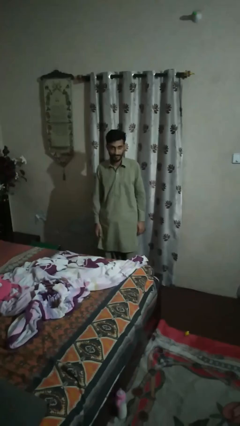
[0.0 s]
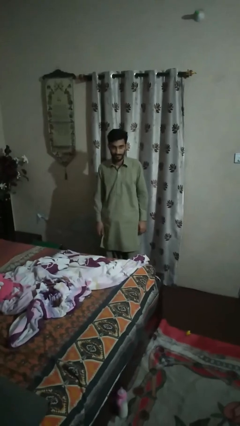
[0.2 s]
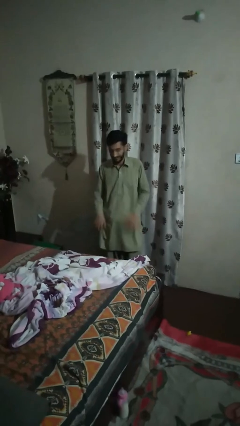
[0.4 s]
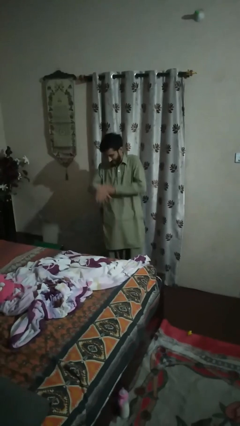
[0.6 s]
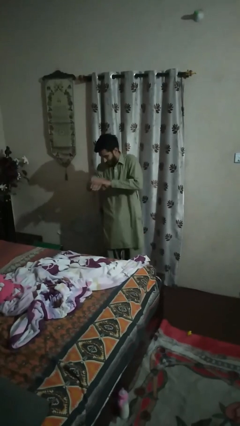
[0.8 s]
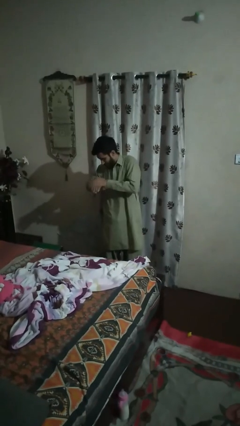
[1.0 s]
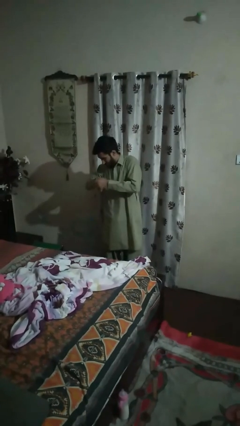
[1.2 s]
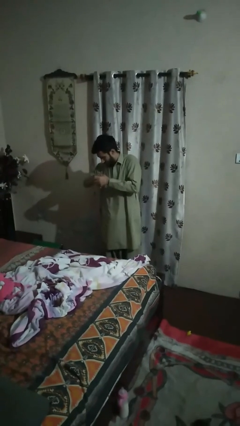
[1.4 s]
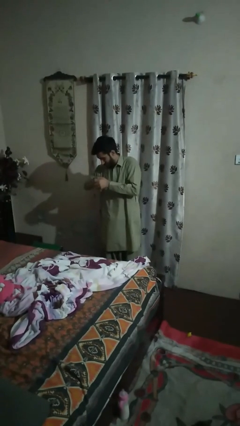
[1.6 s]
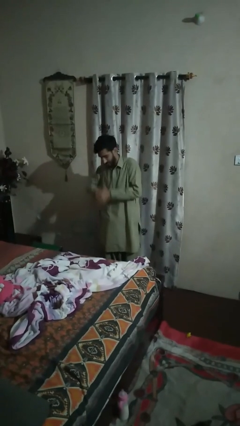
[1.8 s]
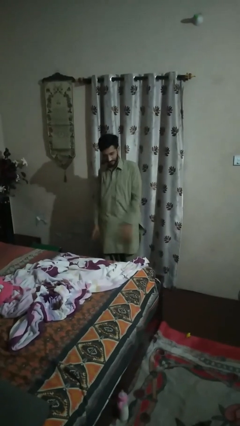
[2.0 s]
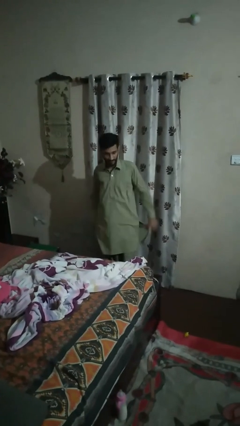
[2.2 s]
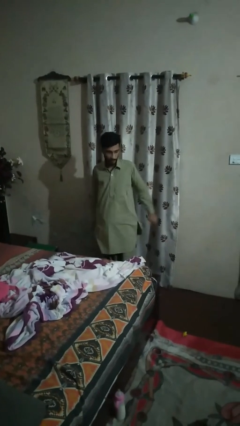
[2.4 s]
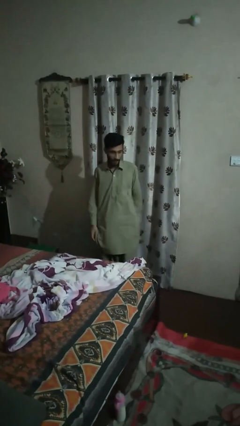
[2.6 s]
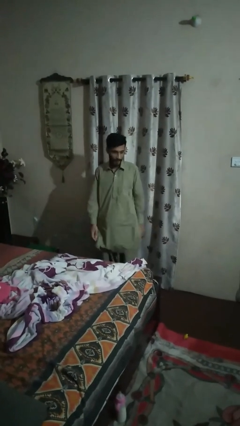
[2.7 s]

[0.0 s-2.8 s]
person swats bug

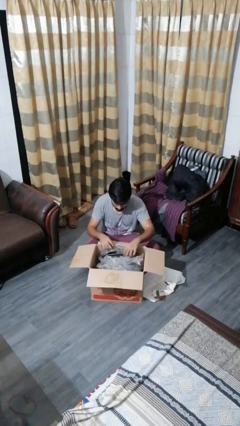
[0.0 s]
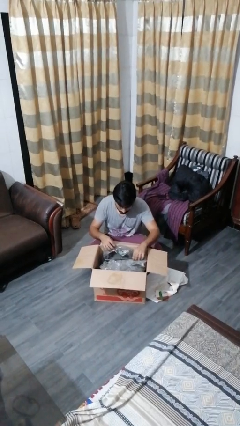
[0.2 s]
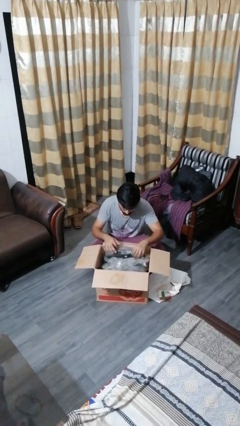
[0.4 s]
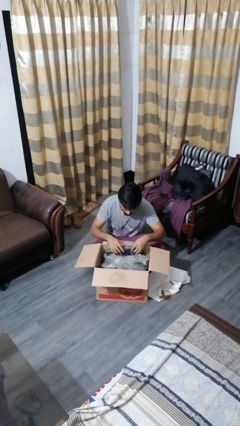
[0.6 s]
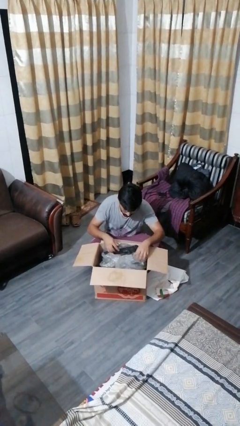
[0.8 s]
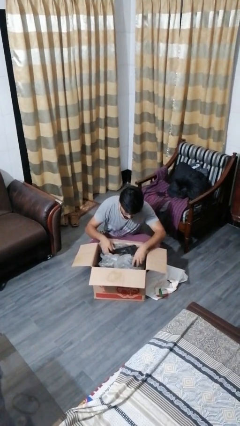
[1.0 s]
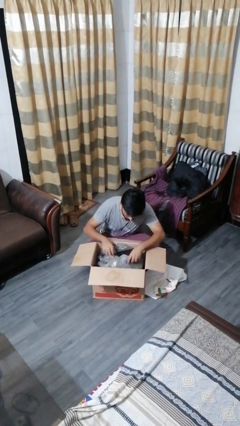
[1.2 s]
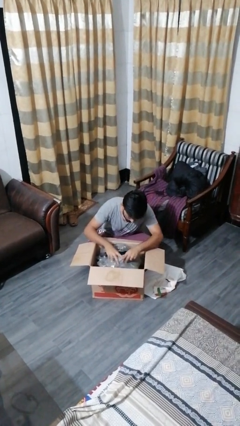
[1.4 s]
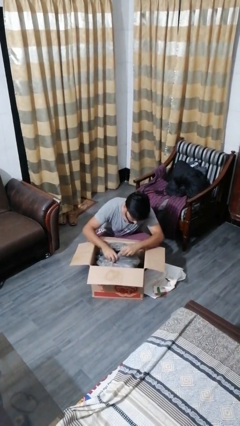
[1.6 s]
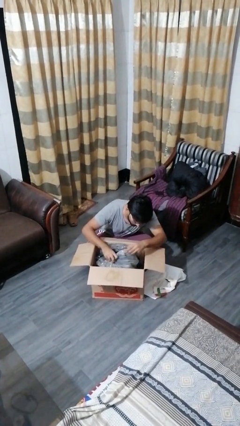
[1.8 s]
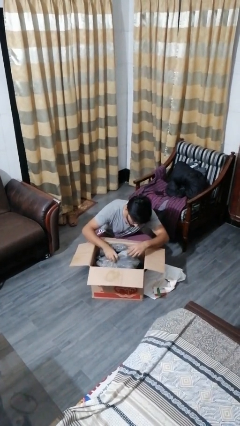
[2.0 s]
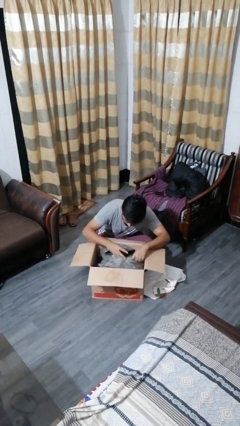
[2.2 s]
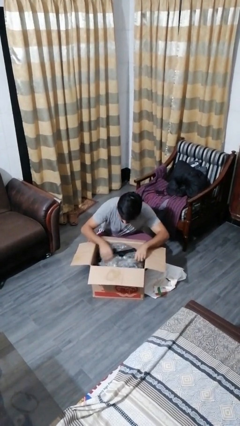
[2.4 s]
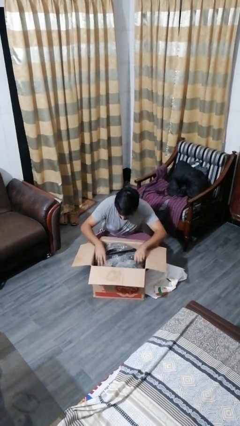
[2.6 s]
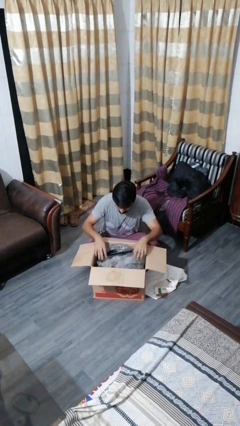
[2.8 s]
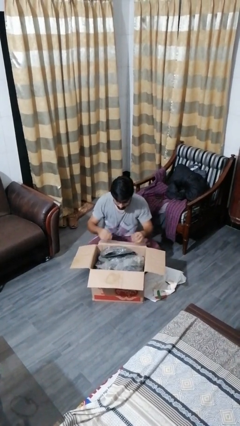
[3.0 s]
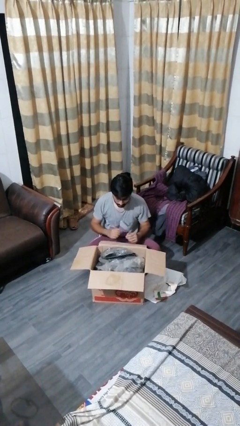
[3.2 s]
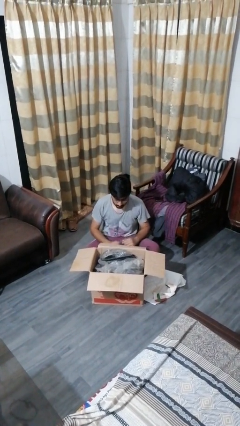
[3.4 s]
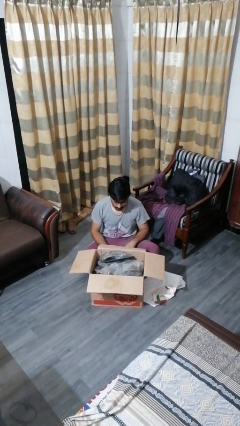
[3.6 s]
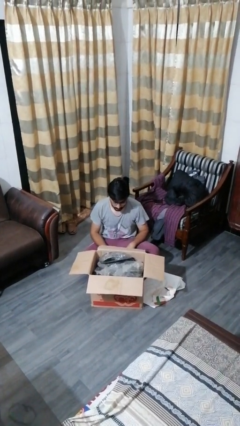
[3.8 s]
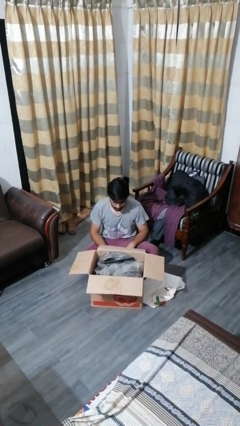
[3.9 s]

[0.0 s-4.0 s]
person searches in box

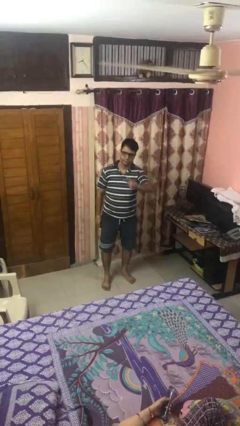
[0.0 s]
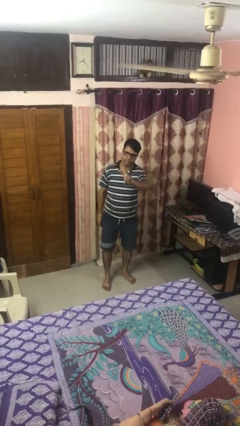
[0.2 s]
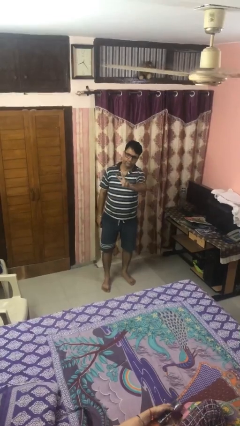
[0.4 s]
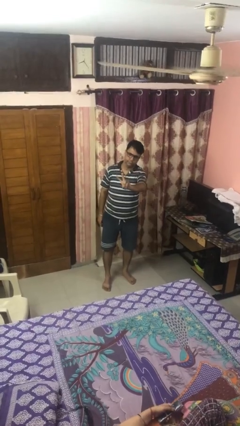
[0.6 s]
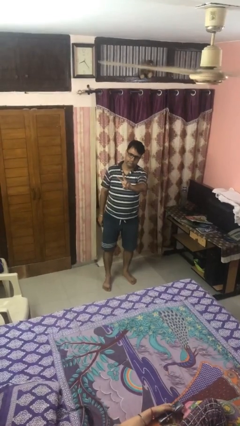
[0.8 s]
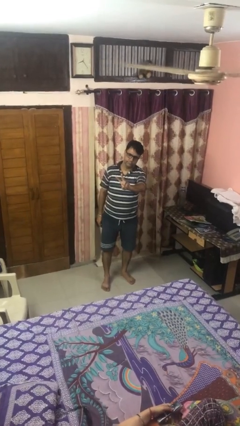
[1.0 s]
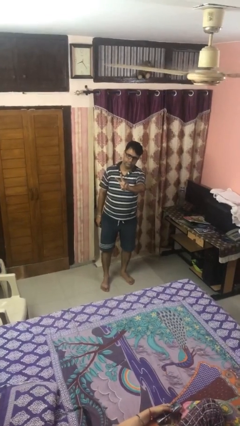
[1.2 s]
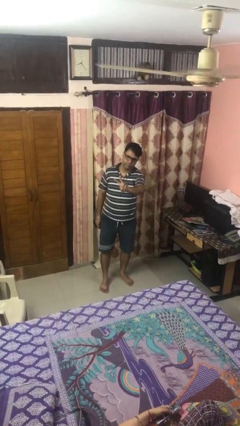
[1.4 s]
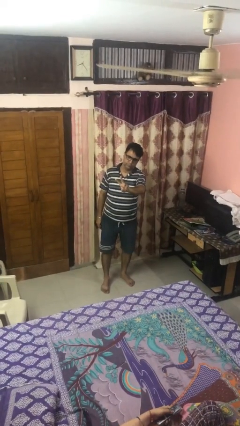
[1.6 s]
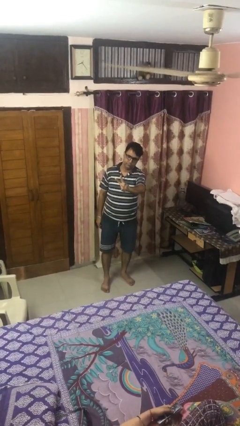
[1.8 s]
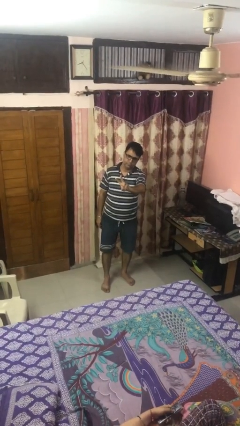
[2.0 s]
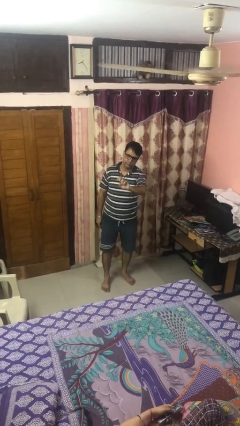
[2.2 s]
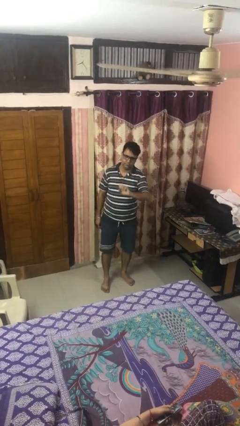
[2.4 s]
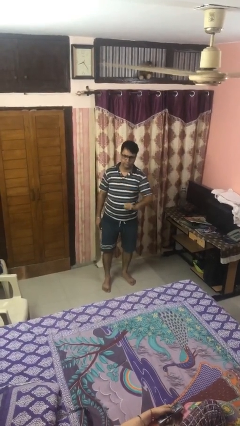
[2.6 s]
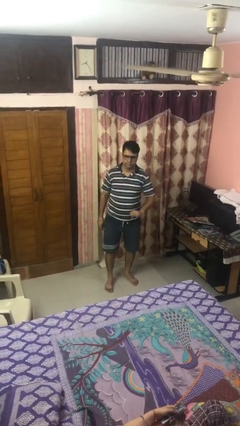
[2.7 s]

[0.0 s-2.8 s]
person gestures peace

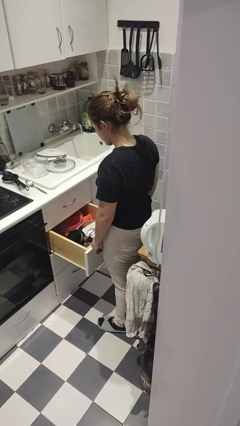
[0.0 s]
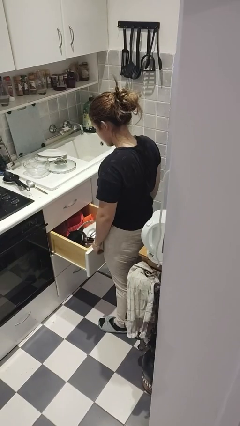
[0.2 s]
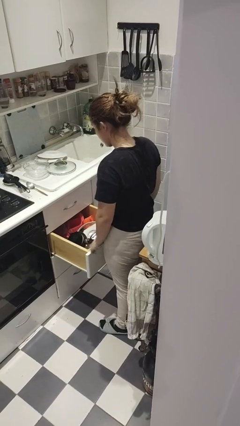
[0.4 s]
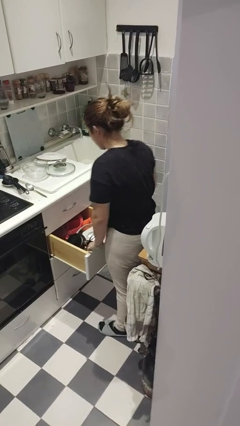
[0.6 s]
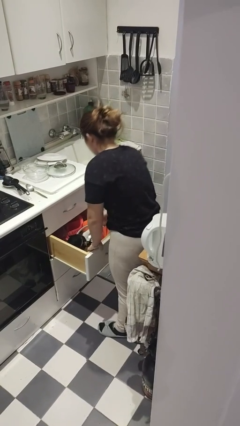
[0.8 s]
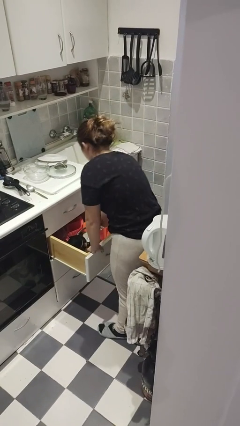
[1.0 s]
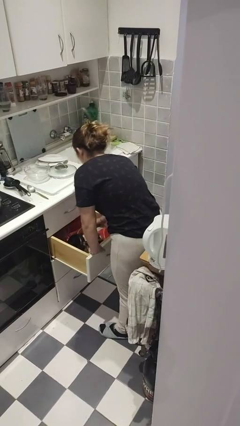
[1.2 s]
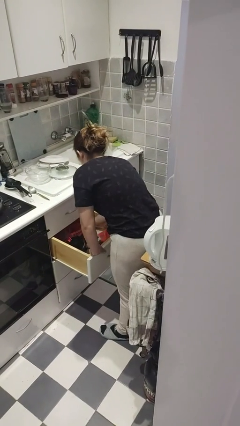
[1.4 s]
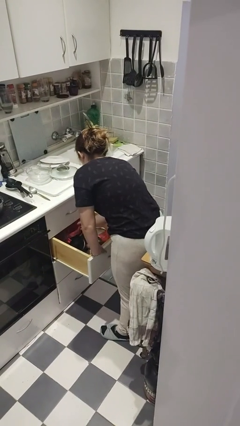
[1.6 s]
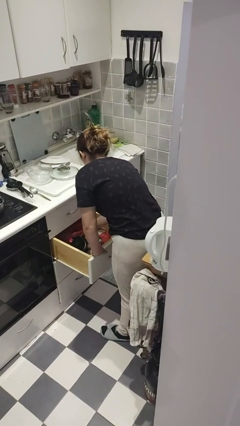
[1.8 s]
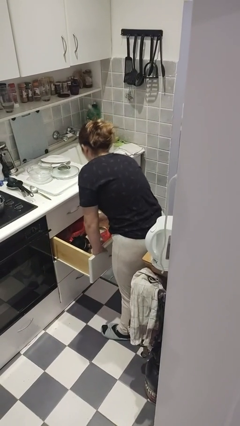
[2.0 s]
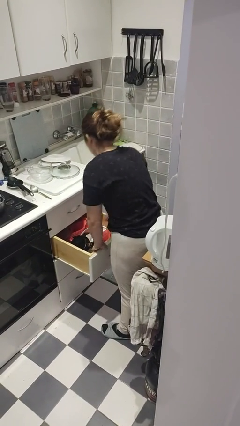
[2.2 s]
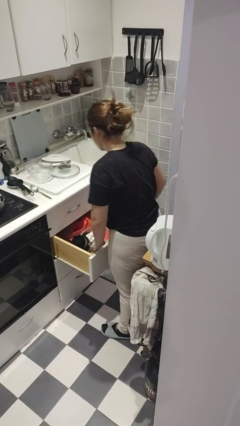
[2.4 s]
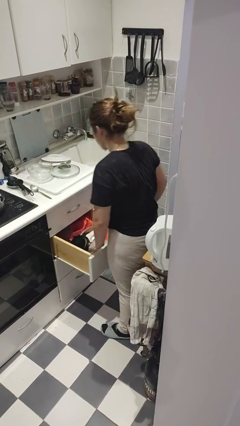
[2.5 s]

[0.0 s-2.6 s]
person searches in kitchen drawer

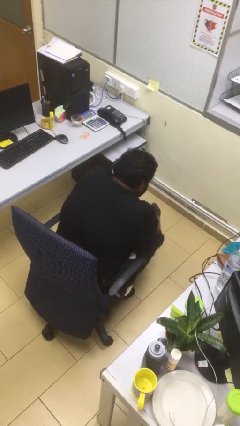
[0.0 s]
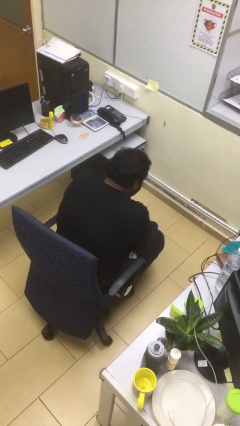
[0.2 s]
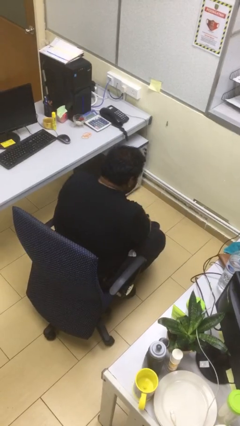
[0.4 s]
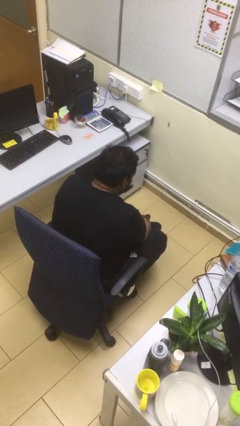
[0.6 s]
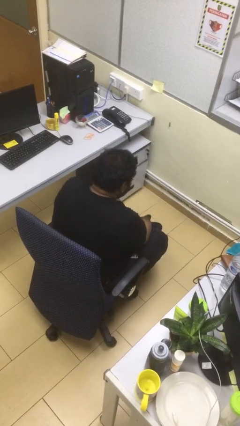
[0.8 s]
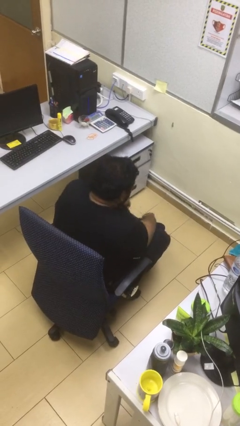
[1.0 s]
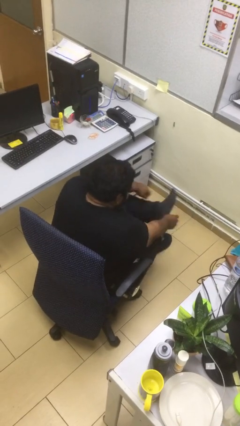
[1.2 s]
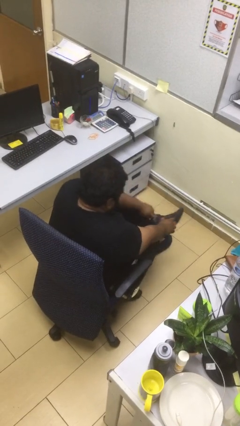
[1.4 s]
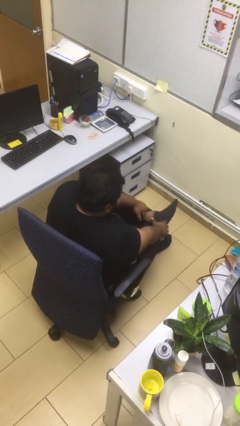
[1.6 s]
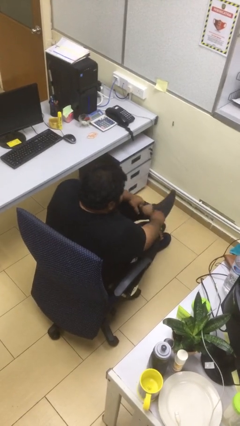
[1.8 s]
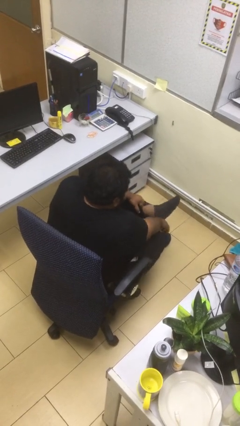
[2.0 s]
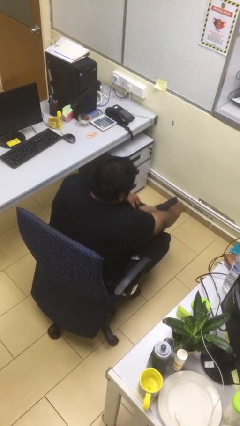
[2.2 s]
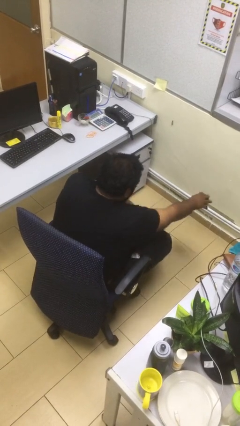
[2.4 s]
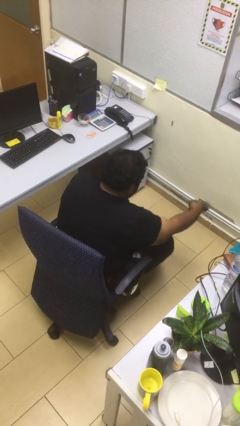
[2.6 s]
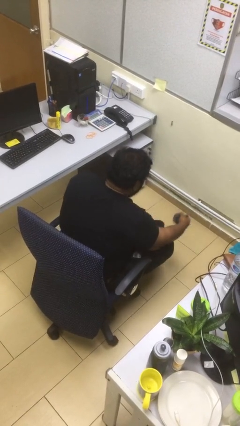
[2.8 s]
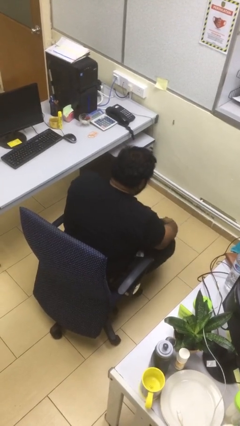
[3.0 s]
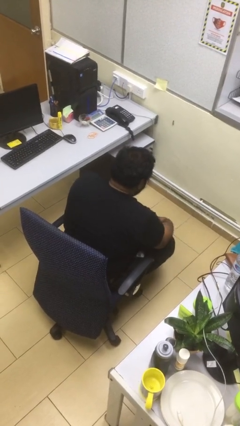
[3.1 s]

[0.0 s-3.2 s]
person takes off socks

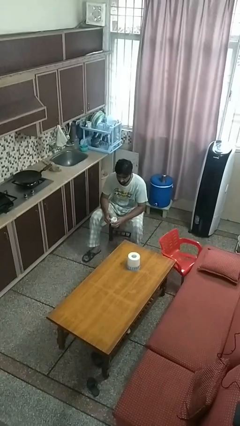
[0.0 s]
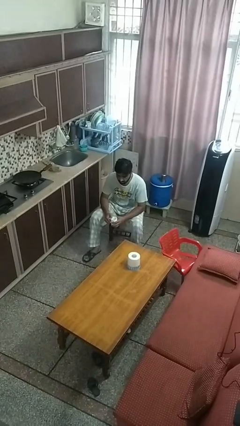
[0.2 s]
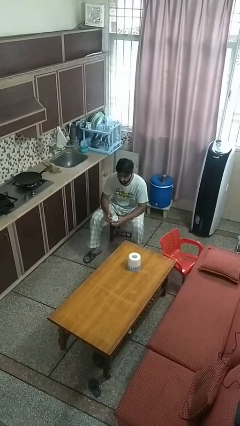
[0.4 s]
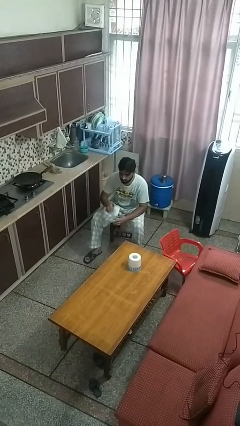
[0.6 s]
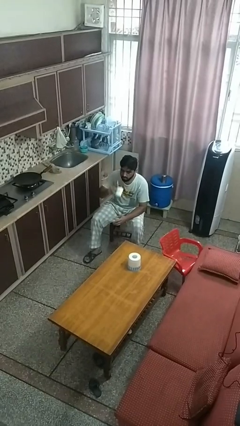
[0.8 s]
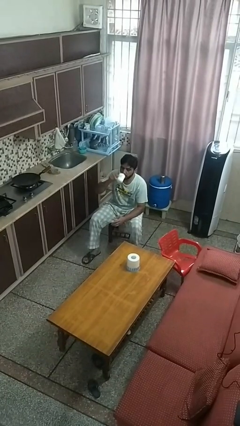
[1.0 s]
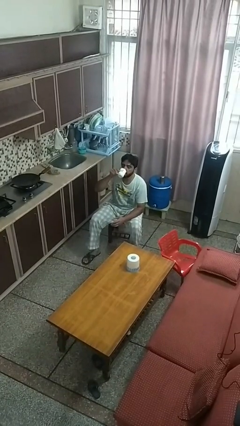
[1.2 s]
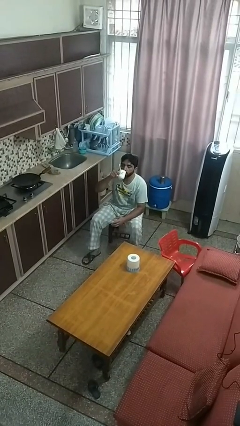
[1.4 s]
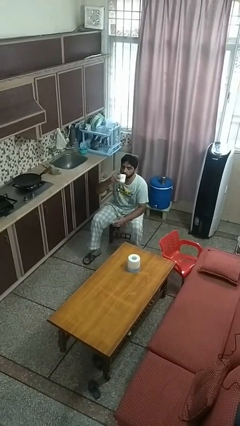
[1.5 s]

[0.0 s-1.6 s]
person drinks from mug

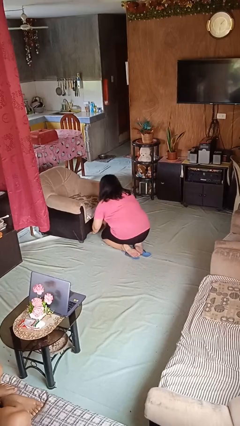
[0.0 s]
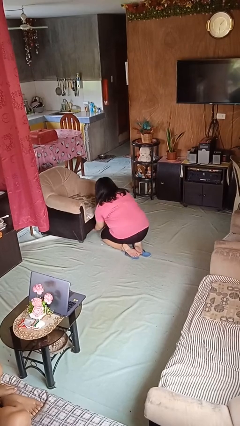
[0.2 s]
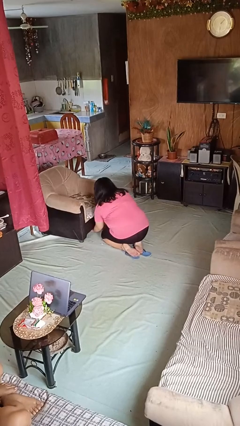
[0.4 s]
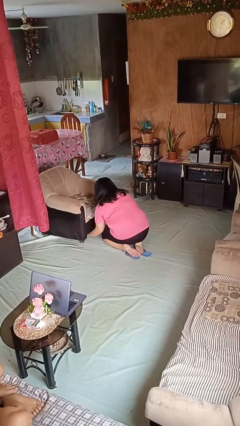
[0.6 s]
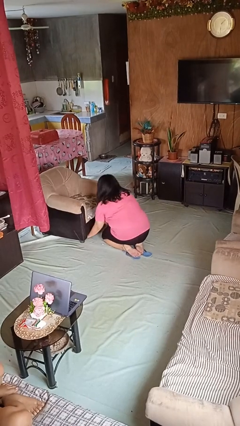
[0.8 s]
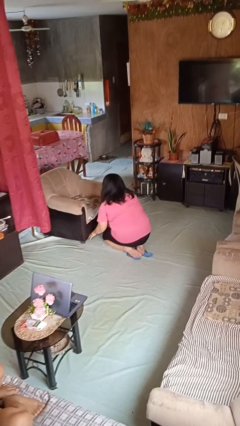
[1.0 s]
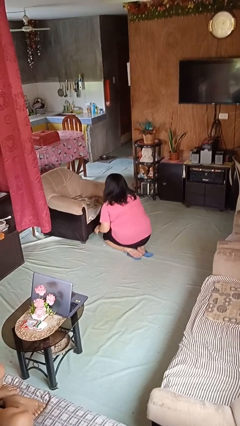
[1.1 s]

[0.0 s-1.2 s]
person searches under couch
